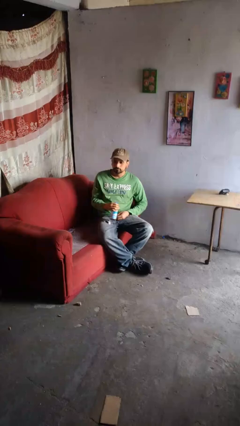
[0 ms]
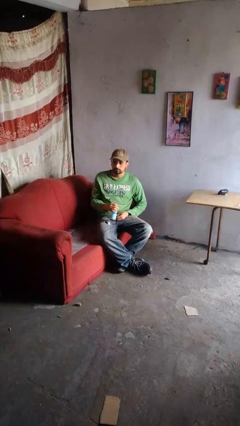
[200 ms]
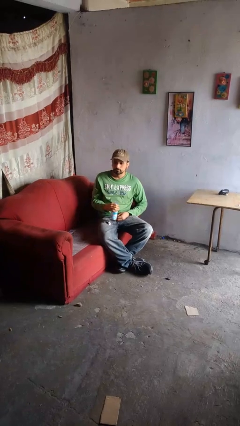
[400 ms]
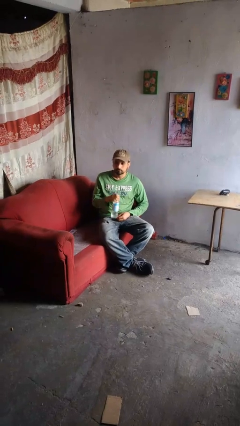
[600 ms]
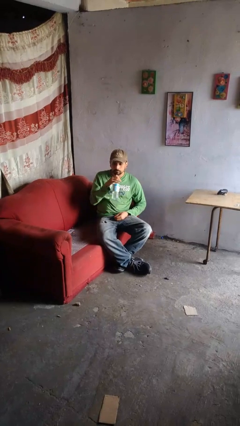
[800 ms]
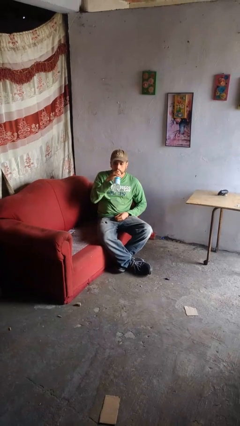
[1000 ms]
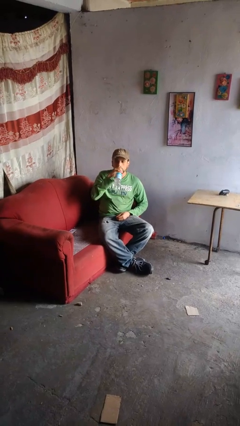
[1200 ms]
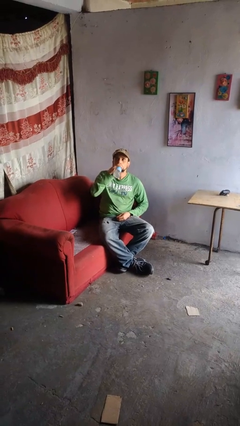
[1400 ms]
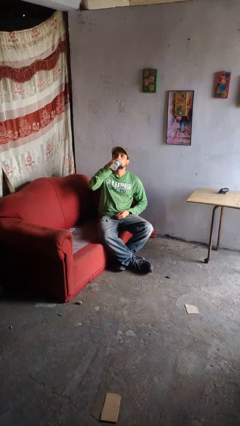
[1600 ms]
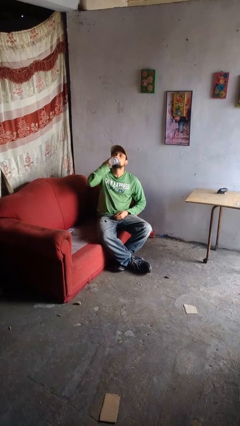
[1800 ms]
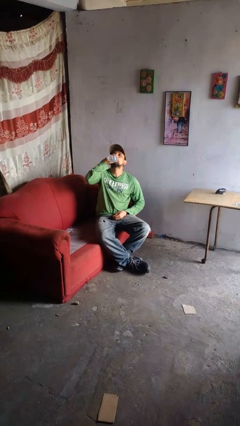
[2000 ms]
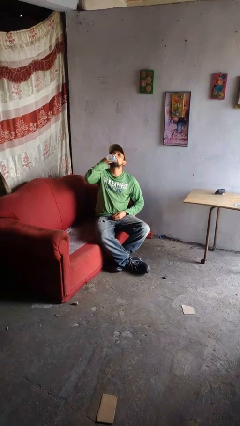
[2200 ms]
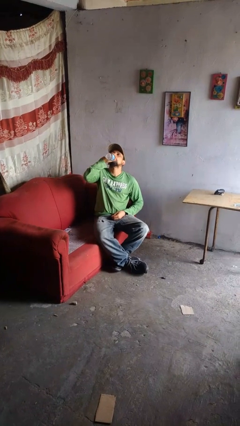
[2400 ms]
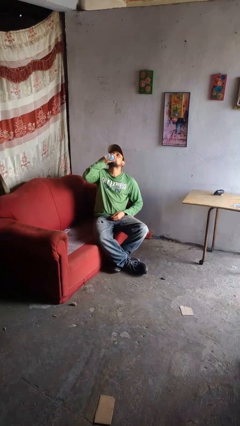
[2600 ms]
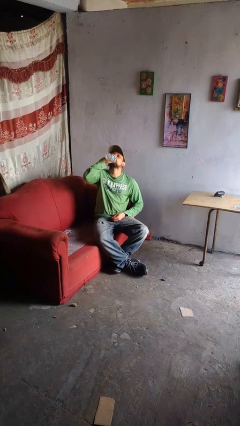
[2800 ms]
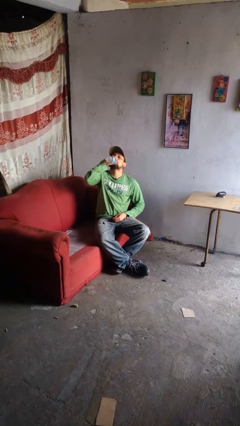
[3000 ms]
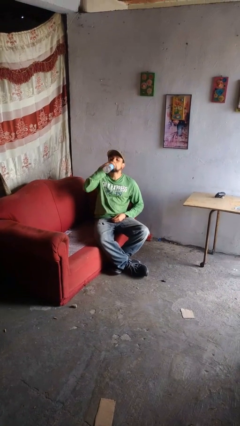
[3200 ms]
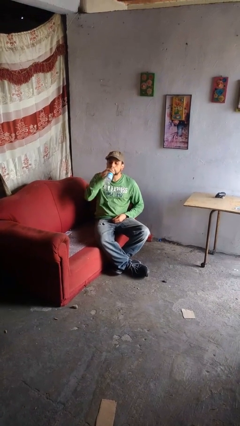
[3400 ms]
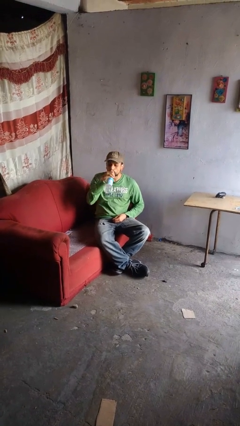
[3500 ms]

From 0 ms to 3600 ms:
person drinks from bottle

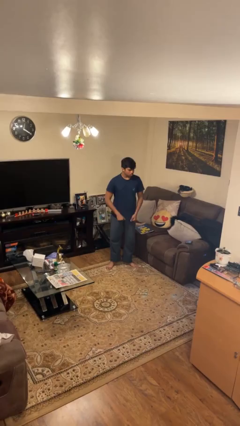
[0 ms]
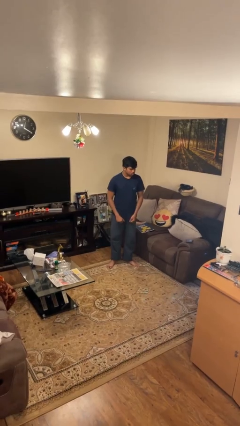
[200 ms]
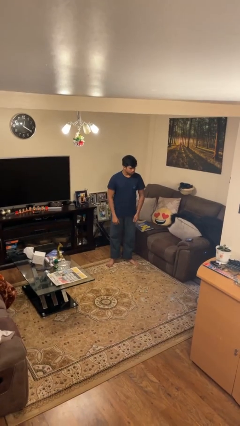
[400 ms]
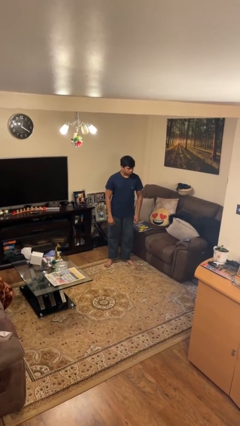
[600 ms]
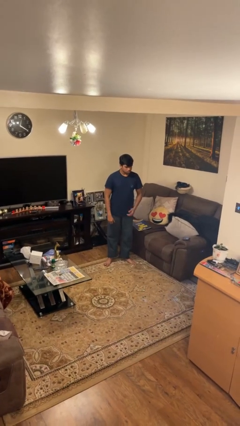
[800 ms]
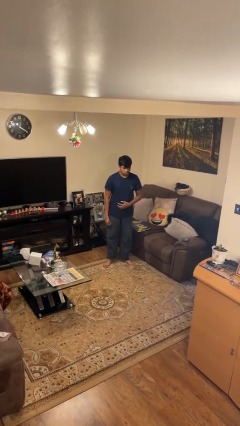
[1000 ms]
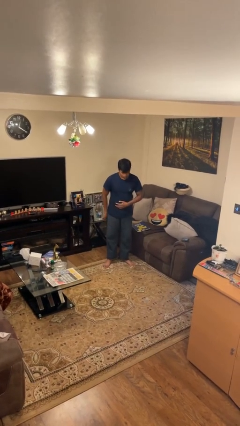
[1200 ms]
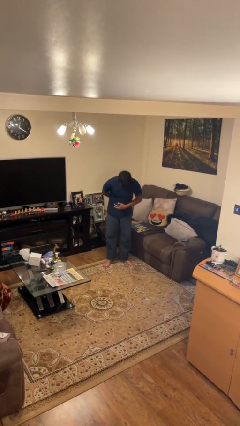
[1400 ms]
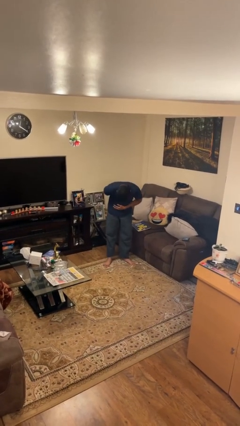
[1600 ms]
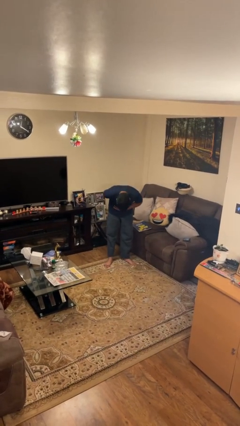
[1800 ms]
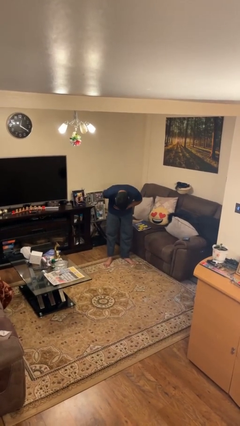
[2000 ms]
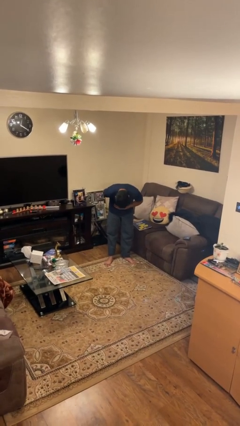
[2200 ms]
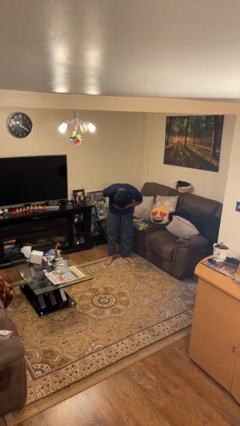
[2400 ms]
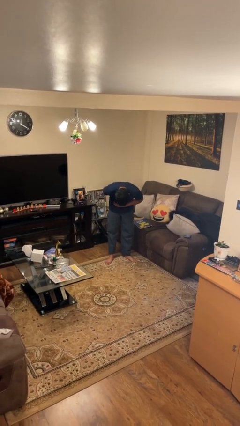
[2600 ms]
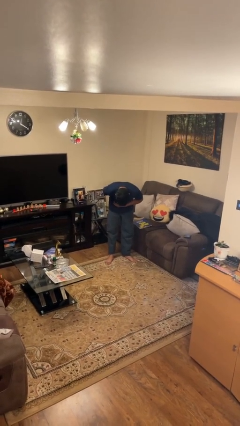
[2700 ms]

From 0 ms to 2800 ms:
person bows

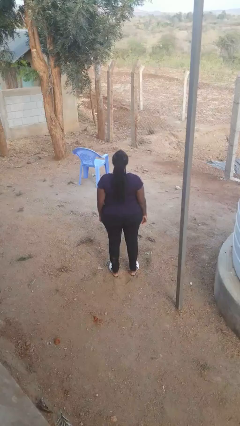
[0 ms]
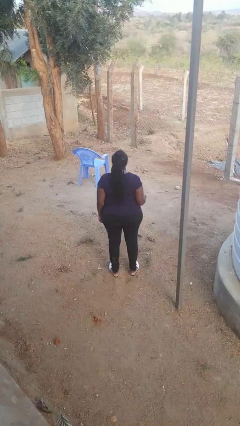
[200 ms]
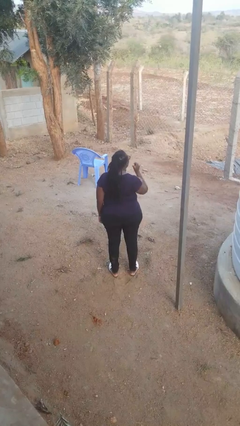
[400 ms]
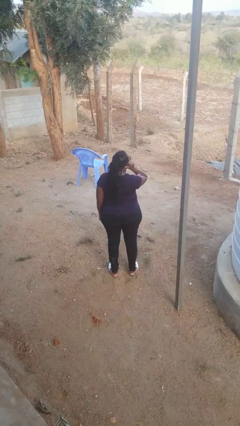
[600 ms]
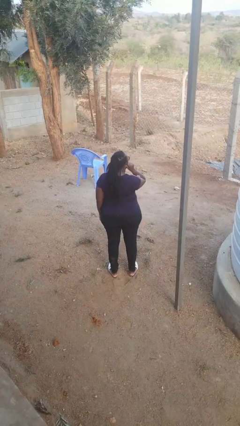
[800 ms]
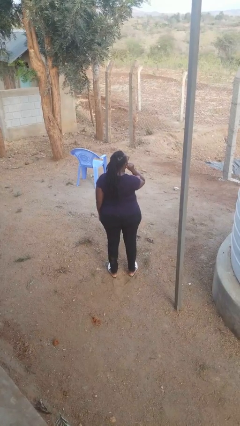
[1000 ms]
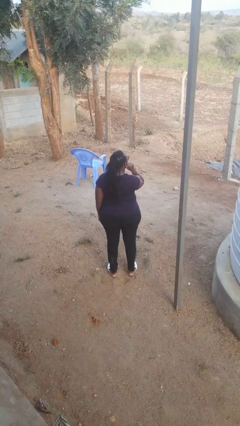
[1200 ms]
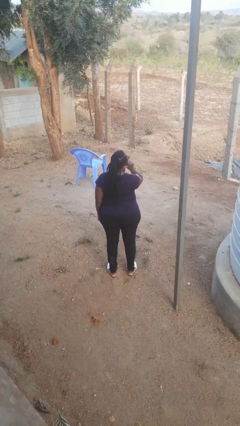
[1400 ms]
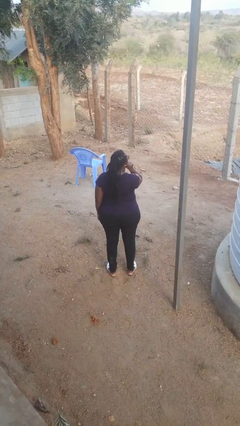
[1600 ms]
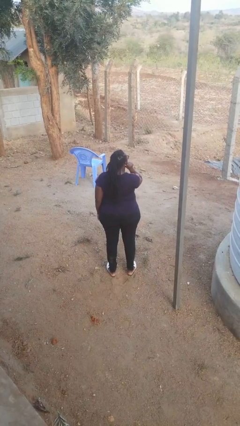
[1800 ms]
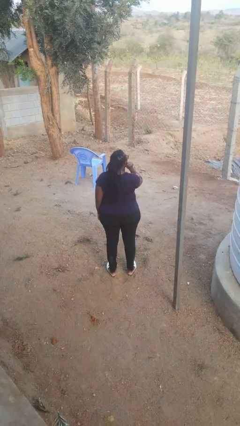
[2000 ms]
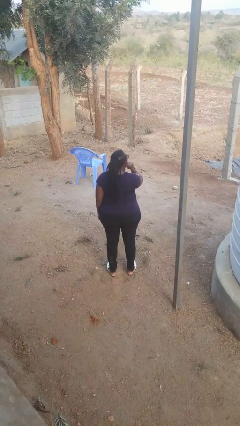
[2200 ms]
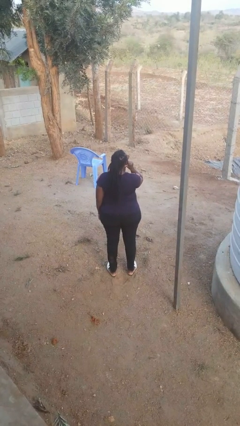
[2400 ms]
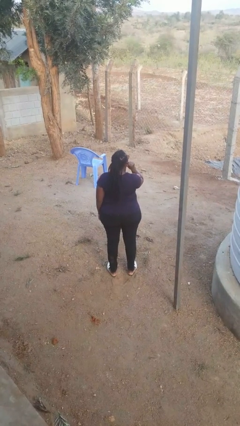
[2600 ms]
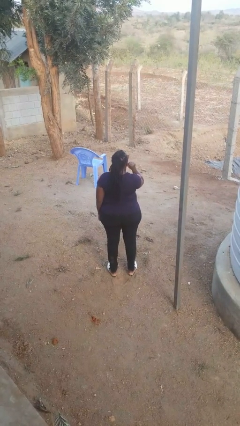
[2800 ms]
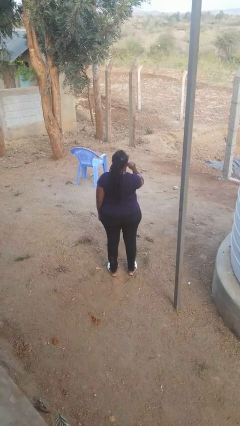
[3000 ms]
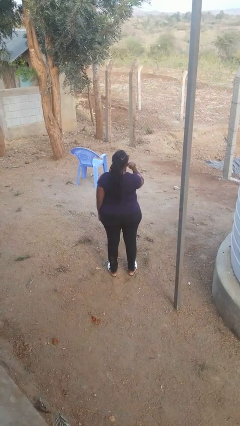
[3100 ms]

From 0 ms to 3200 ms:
person touches earlobe

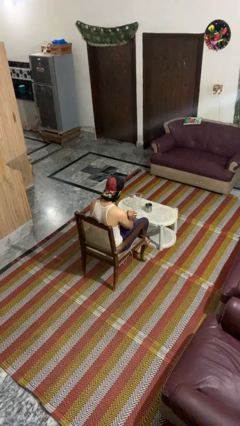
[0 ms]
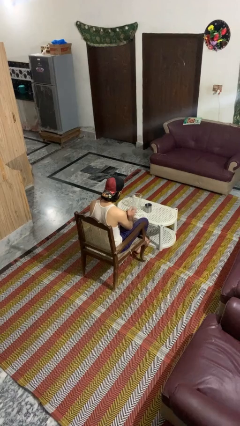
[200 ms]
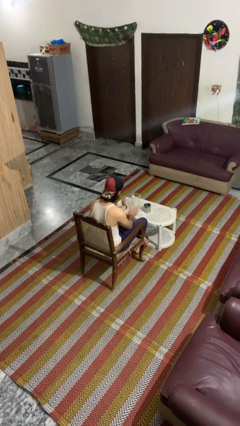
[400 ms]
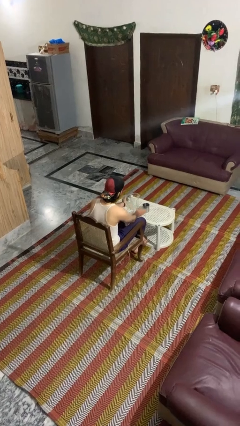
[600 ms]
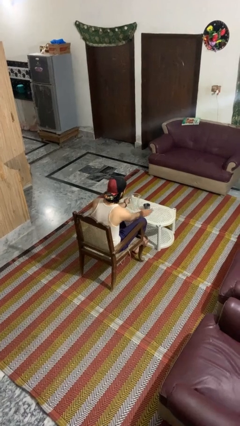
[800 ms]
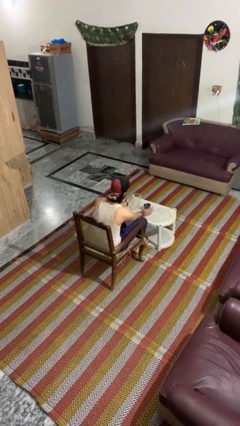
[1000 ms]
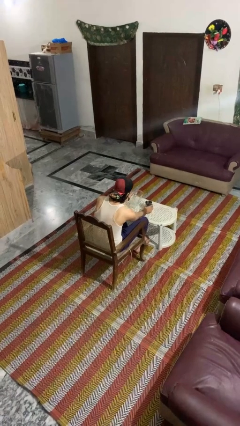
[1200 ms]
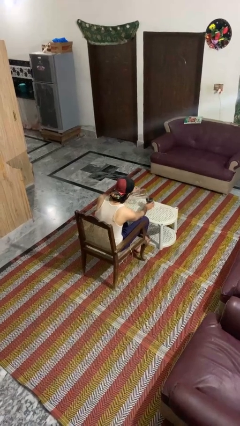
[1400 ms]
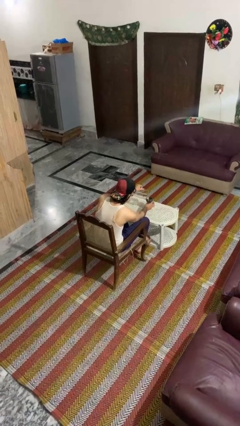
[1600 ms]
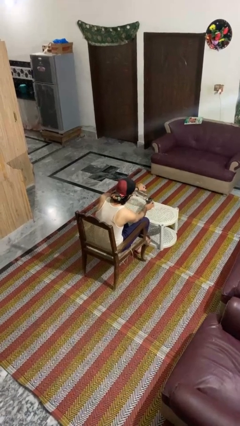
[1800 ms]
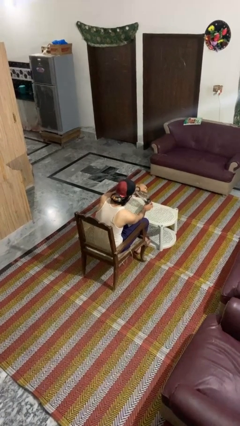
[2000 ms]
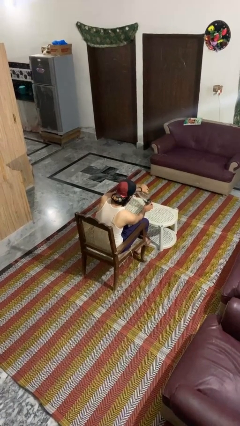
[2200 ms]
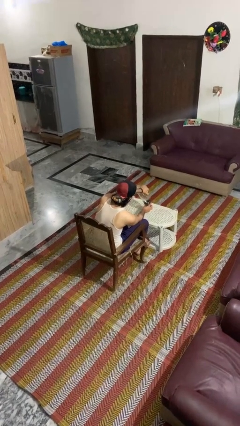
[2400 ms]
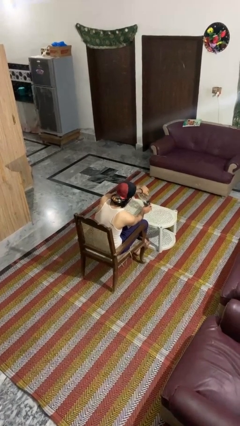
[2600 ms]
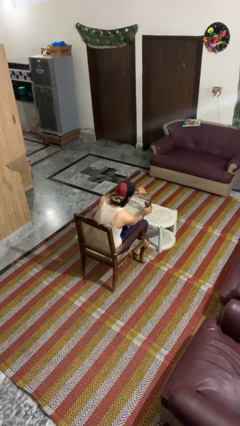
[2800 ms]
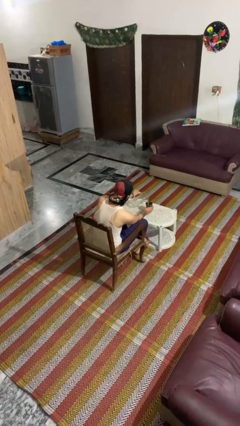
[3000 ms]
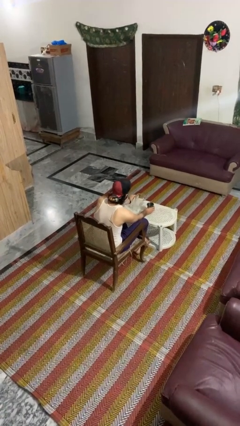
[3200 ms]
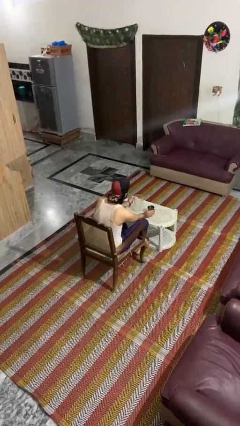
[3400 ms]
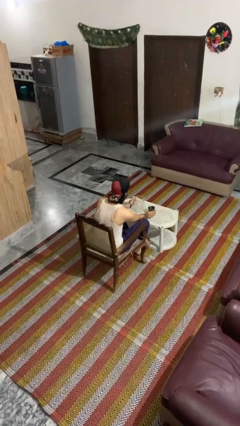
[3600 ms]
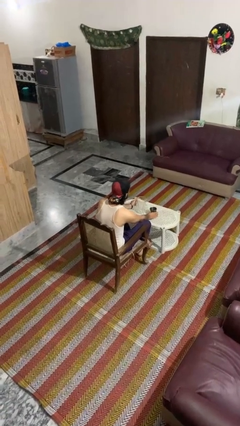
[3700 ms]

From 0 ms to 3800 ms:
person pours coffee into mug

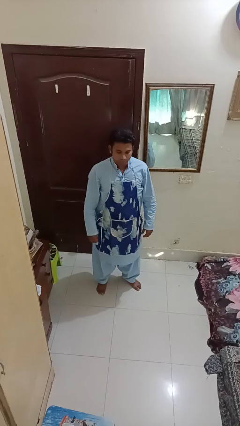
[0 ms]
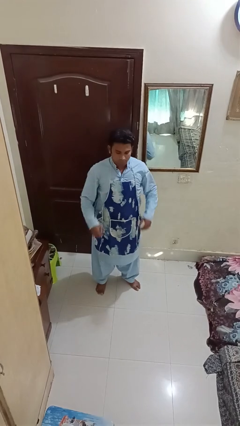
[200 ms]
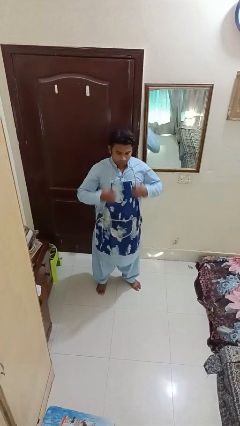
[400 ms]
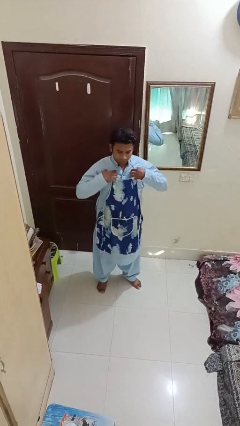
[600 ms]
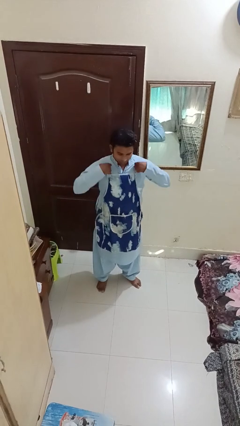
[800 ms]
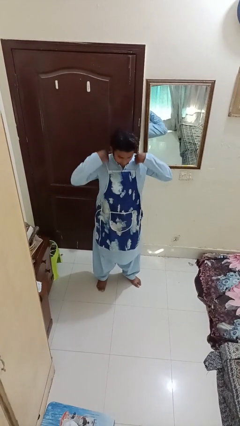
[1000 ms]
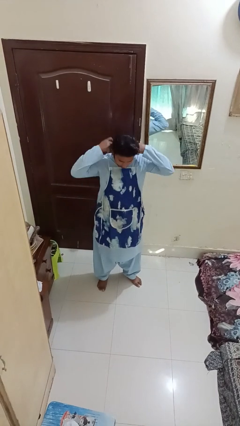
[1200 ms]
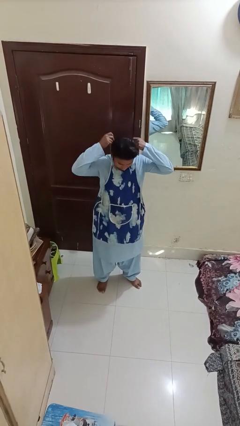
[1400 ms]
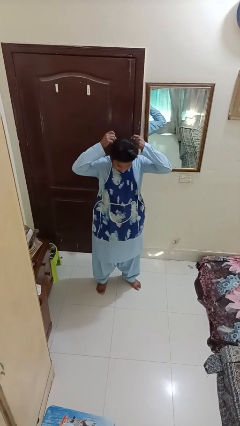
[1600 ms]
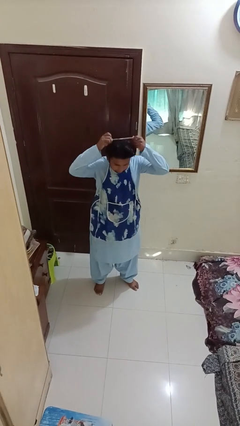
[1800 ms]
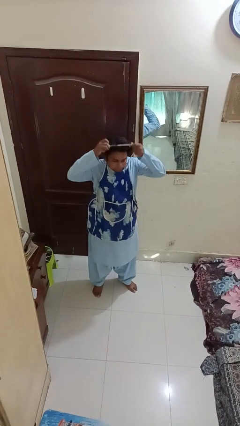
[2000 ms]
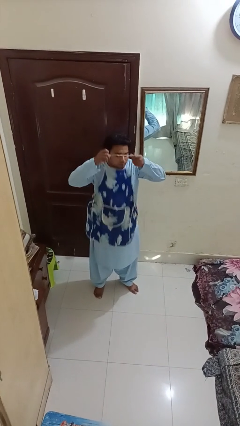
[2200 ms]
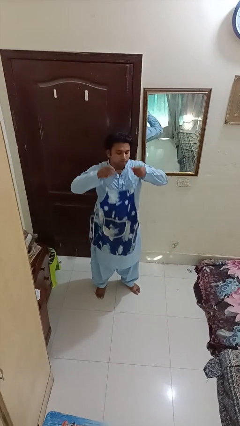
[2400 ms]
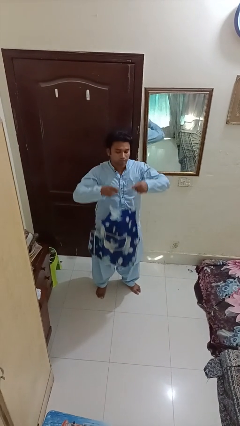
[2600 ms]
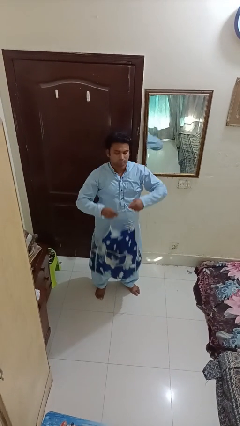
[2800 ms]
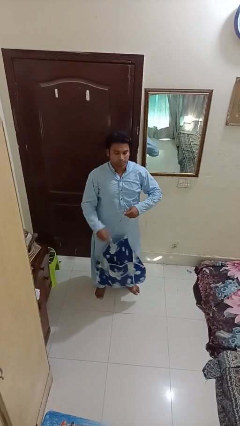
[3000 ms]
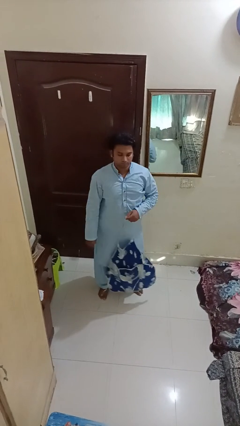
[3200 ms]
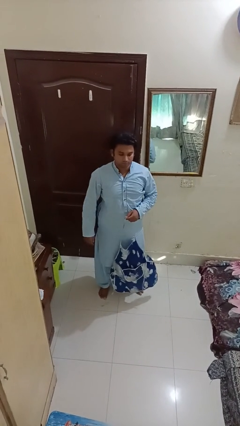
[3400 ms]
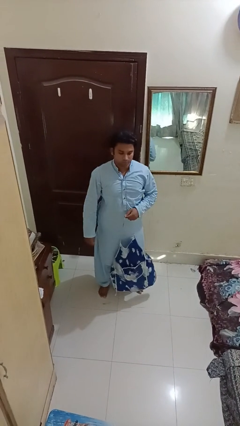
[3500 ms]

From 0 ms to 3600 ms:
person takes off apron

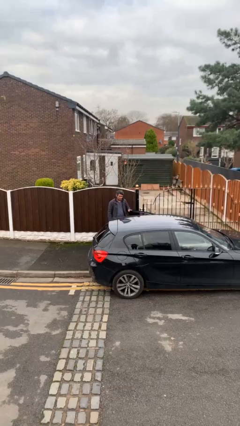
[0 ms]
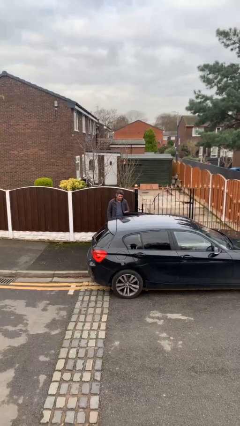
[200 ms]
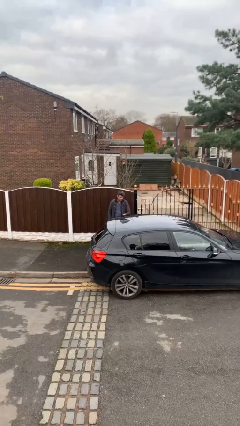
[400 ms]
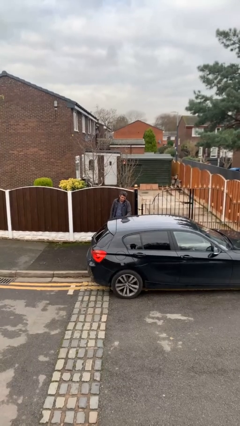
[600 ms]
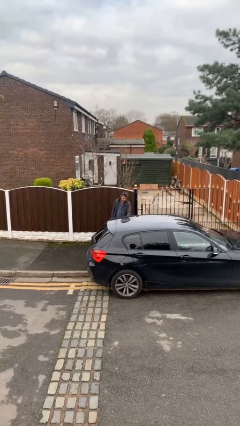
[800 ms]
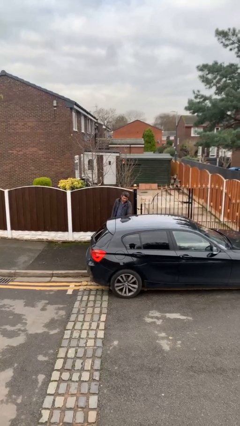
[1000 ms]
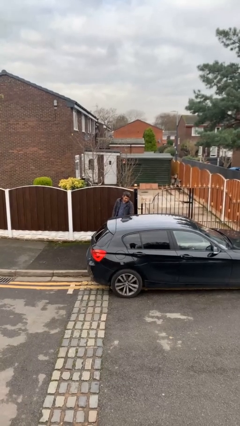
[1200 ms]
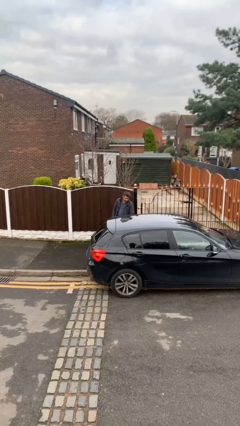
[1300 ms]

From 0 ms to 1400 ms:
person closes car door
